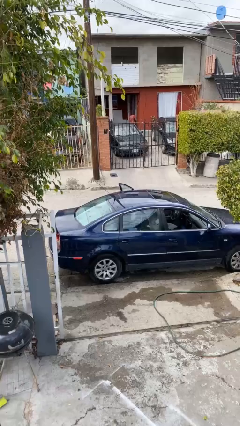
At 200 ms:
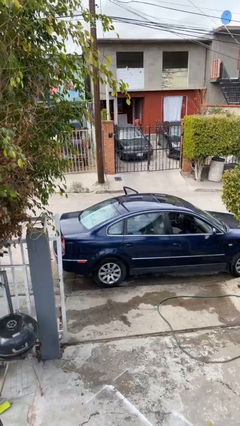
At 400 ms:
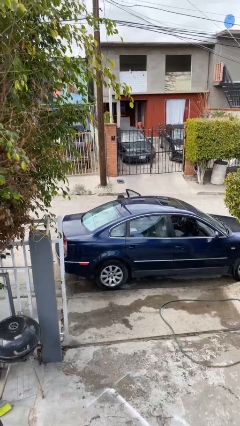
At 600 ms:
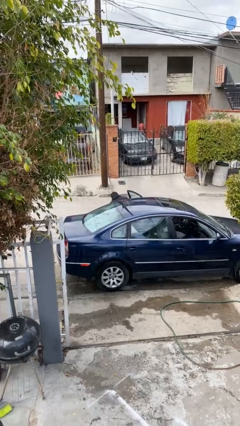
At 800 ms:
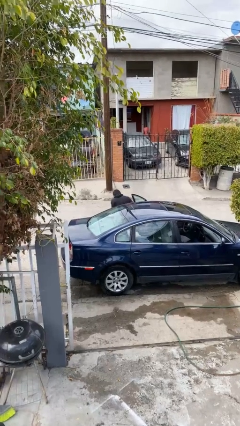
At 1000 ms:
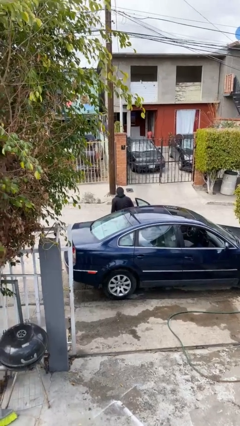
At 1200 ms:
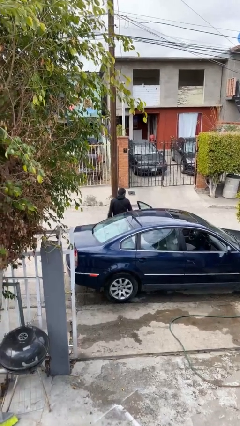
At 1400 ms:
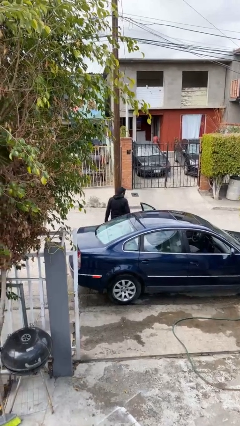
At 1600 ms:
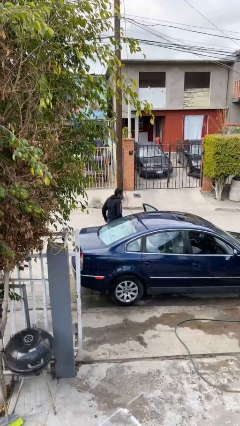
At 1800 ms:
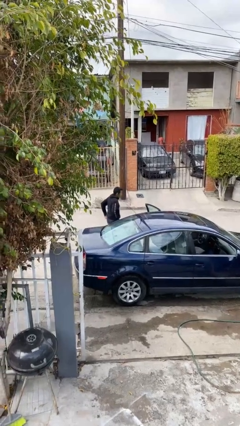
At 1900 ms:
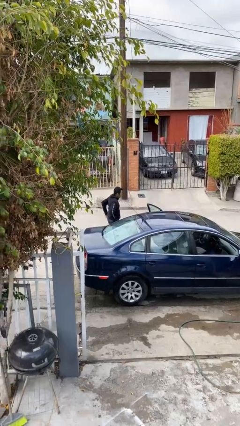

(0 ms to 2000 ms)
person exits car

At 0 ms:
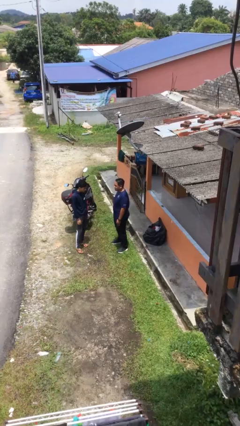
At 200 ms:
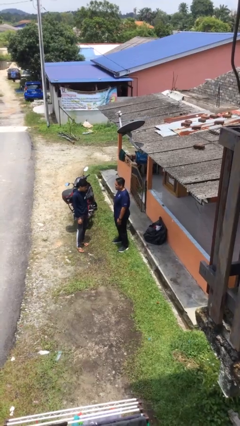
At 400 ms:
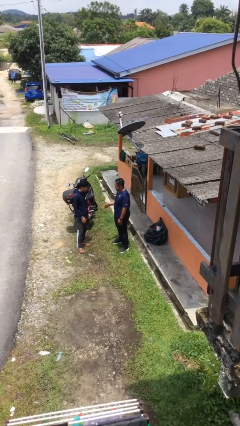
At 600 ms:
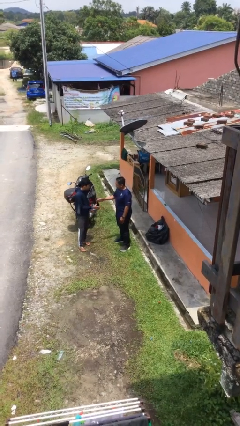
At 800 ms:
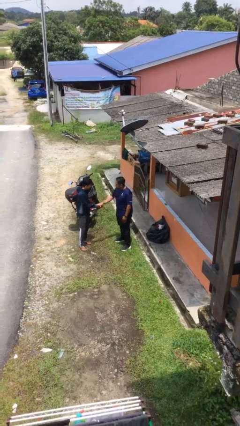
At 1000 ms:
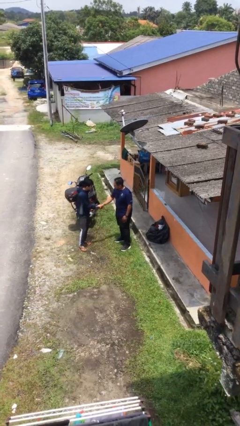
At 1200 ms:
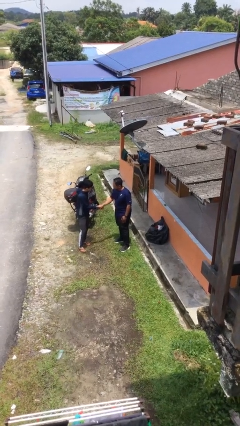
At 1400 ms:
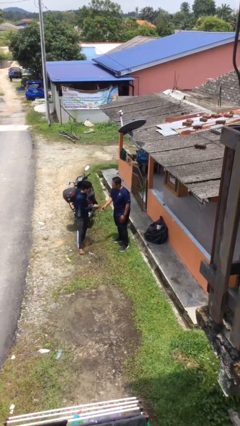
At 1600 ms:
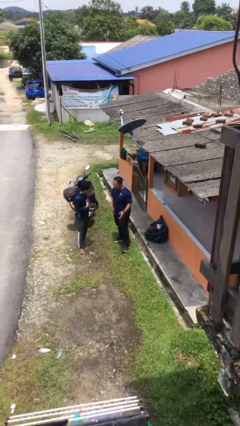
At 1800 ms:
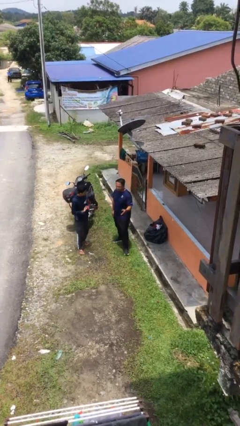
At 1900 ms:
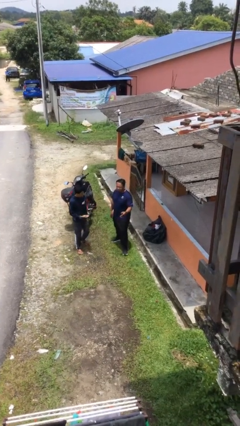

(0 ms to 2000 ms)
person shakes hand

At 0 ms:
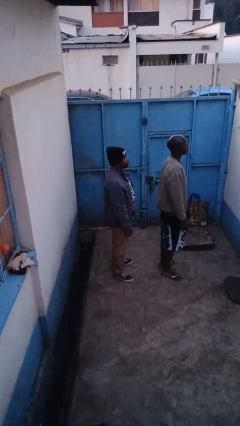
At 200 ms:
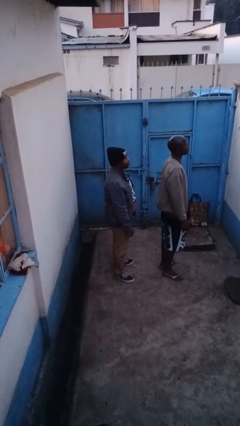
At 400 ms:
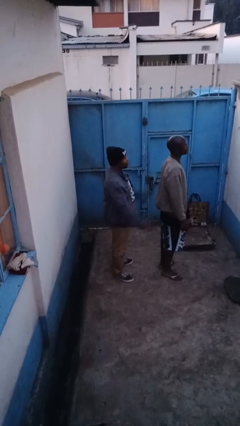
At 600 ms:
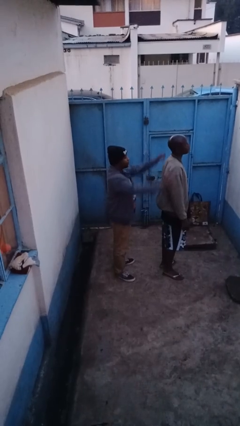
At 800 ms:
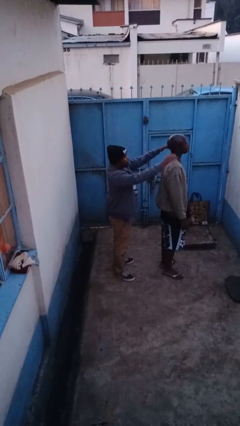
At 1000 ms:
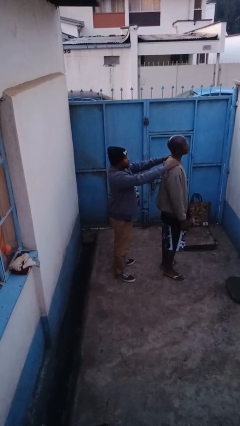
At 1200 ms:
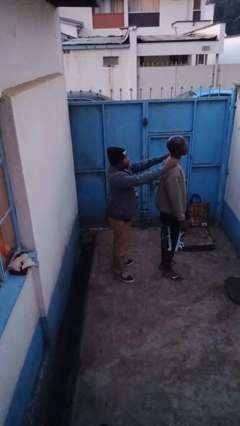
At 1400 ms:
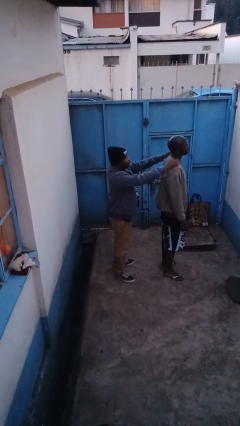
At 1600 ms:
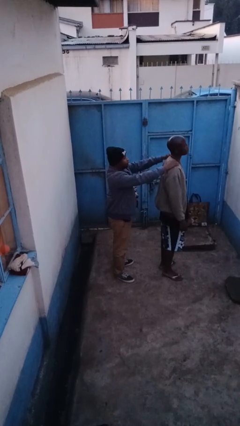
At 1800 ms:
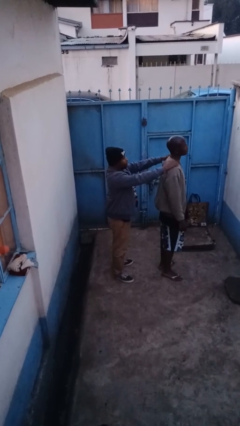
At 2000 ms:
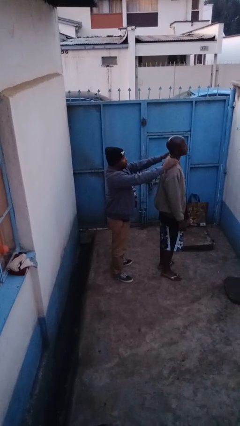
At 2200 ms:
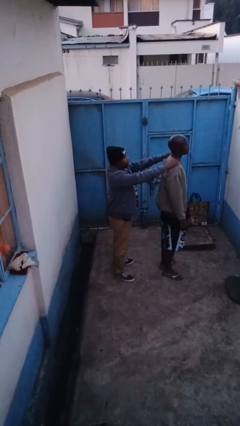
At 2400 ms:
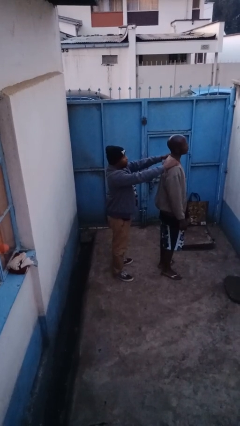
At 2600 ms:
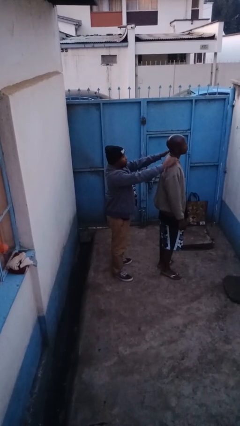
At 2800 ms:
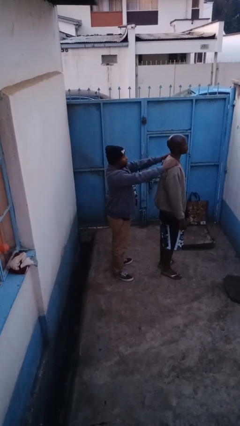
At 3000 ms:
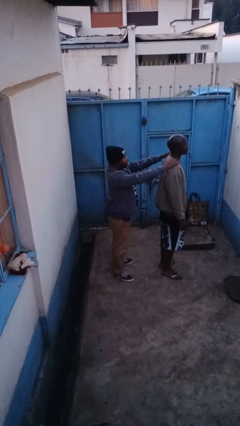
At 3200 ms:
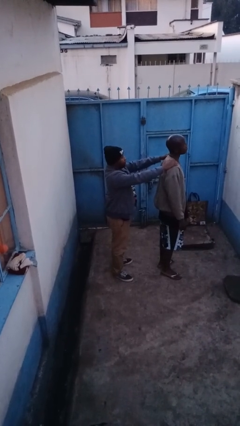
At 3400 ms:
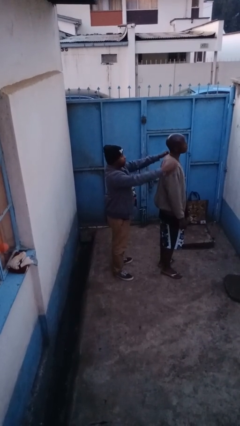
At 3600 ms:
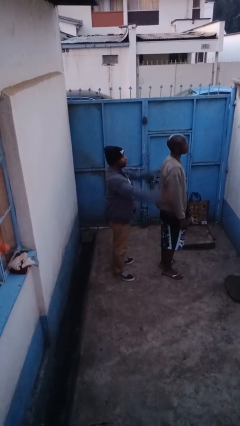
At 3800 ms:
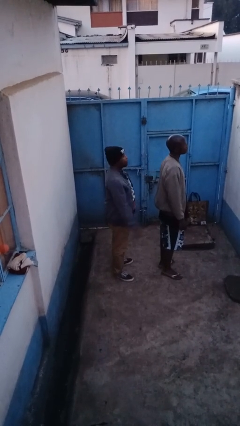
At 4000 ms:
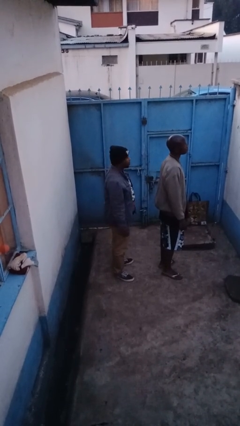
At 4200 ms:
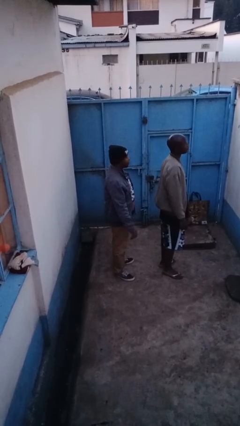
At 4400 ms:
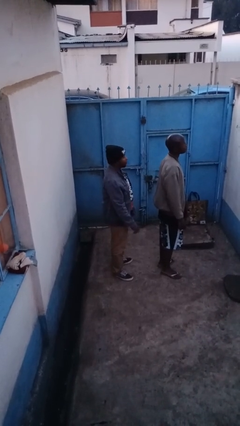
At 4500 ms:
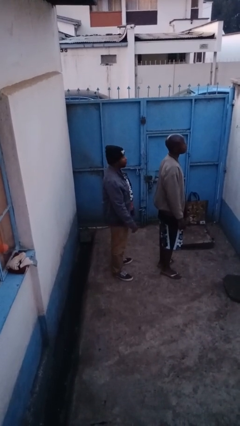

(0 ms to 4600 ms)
person pounds shoulders of person

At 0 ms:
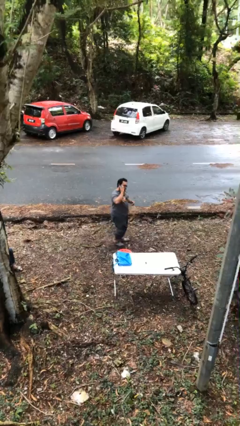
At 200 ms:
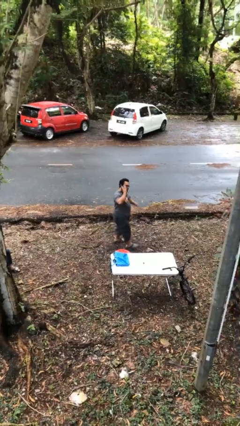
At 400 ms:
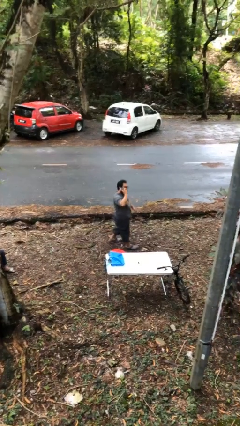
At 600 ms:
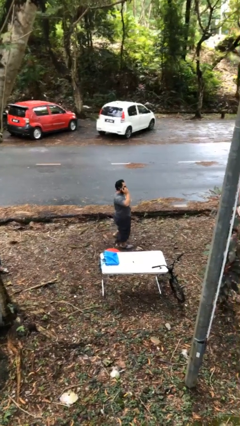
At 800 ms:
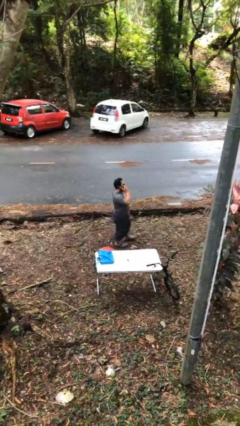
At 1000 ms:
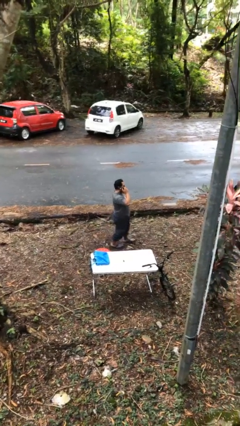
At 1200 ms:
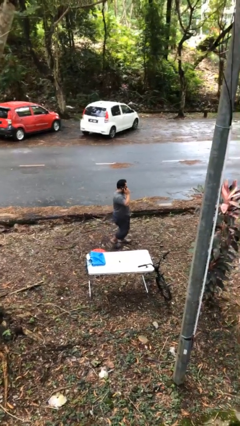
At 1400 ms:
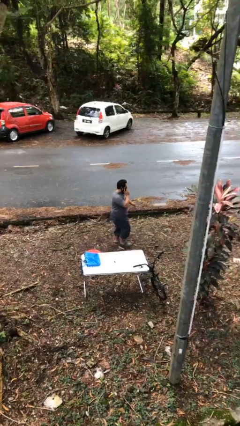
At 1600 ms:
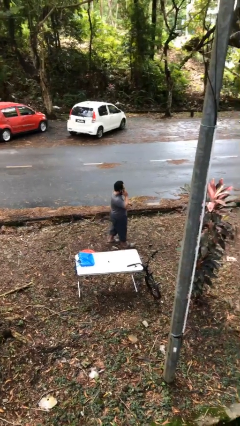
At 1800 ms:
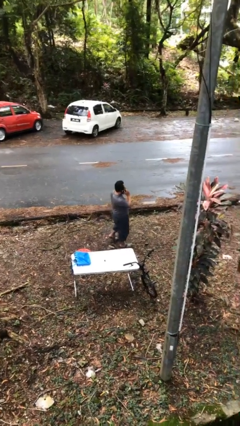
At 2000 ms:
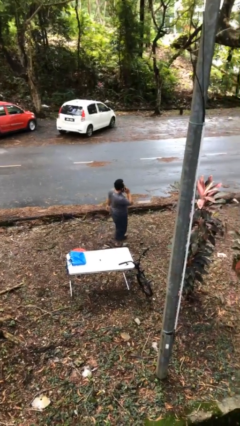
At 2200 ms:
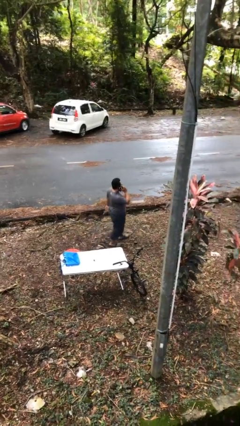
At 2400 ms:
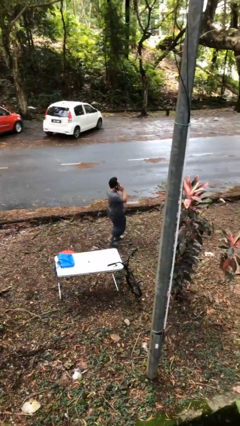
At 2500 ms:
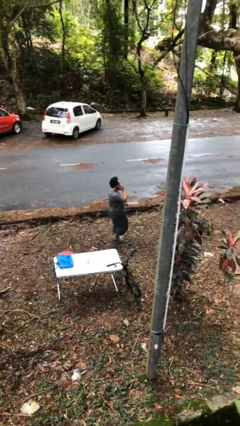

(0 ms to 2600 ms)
person talks on phone

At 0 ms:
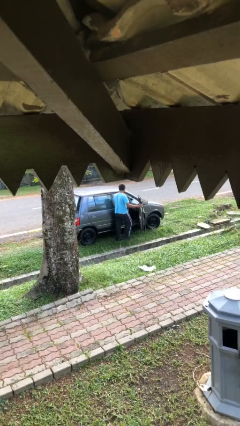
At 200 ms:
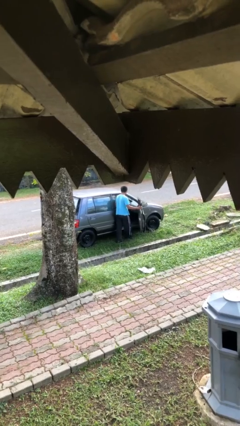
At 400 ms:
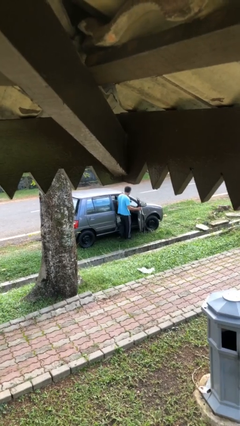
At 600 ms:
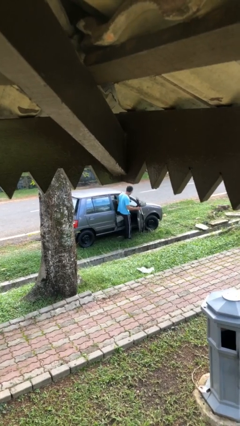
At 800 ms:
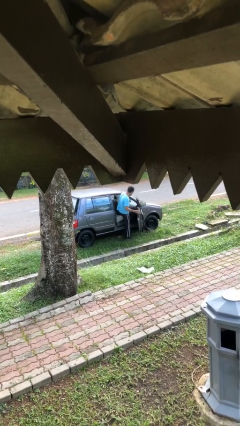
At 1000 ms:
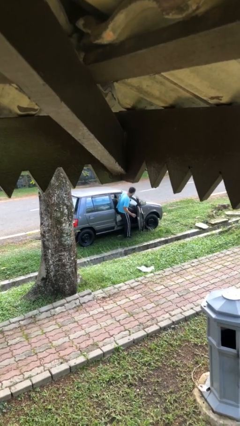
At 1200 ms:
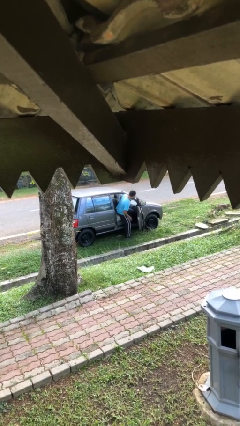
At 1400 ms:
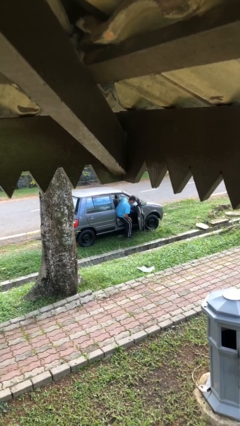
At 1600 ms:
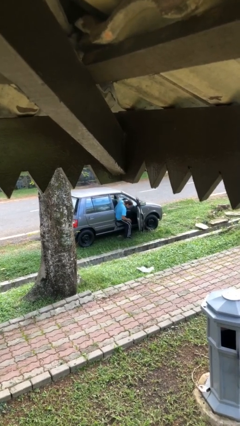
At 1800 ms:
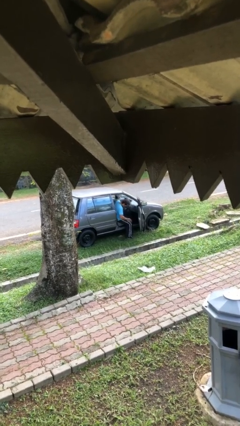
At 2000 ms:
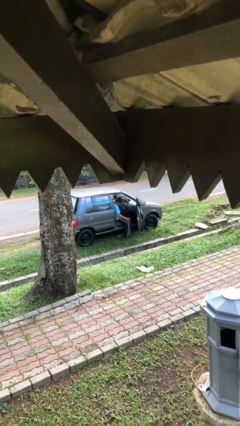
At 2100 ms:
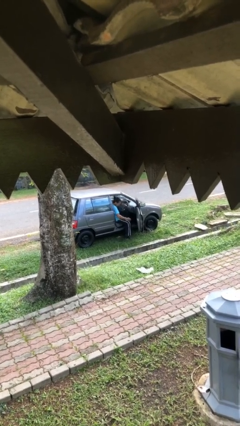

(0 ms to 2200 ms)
person enters car

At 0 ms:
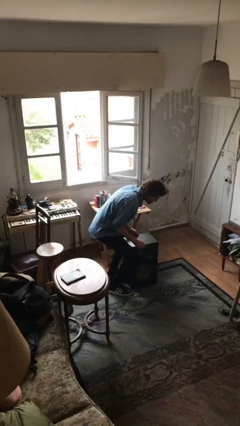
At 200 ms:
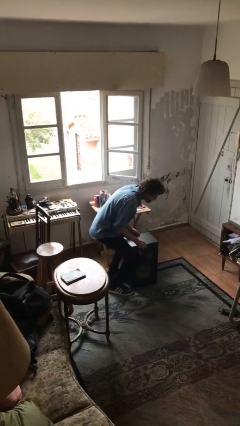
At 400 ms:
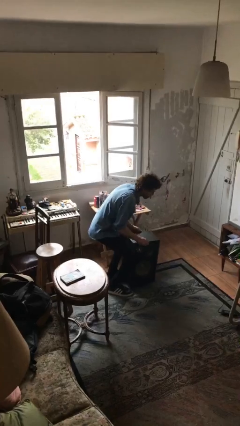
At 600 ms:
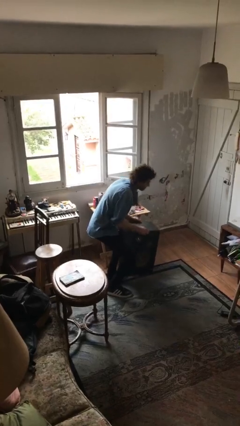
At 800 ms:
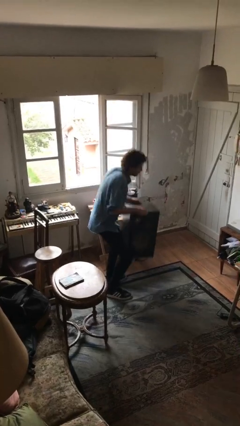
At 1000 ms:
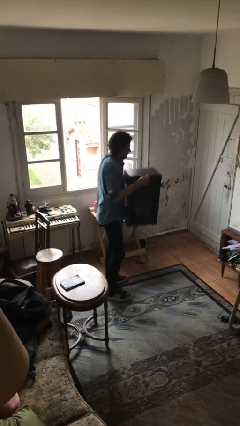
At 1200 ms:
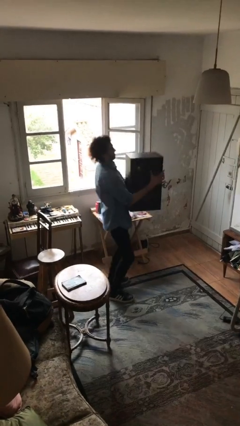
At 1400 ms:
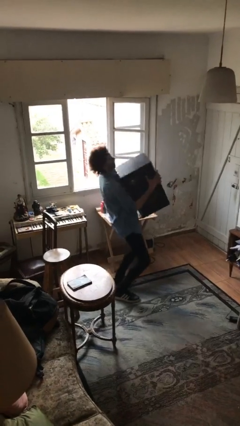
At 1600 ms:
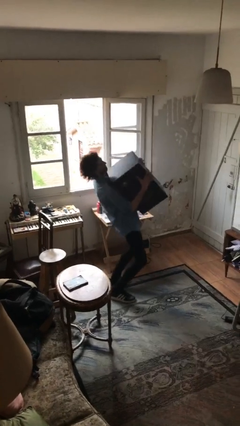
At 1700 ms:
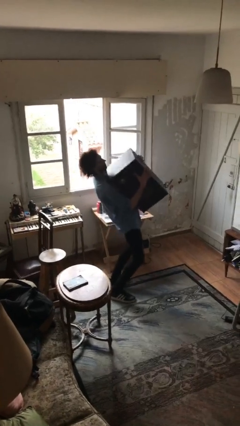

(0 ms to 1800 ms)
person picks up object from floor

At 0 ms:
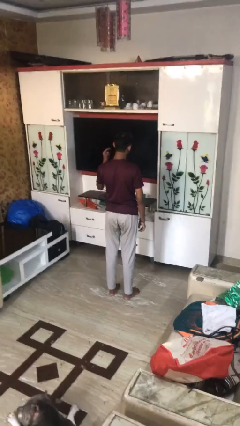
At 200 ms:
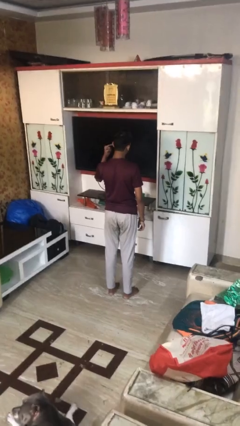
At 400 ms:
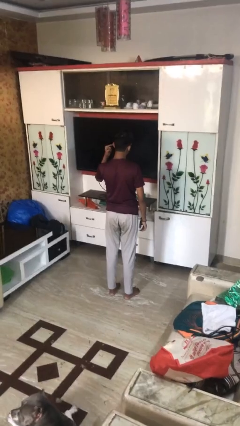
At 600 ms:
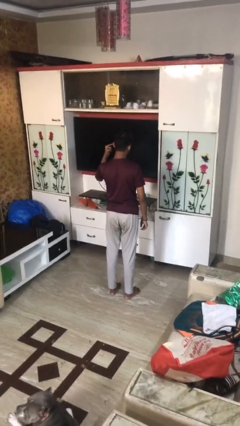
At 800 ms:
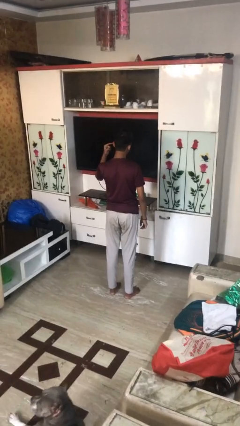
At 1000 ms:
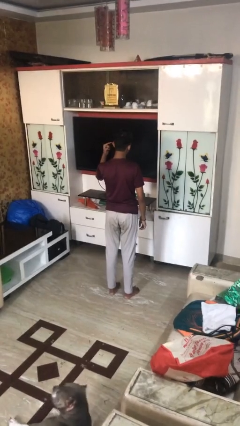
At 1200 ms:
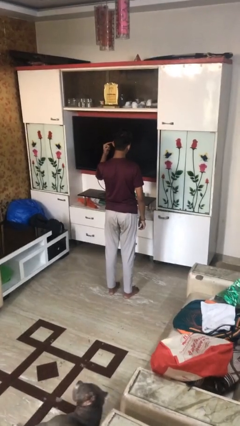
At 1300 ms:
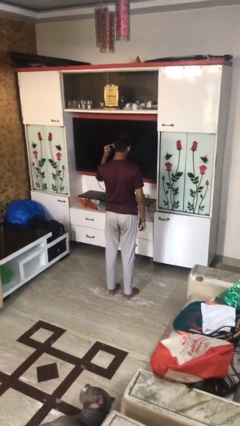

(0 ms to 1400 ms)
person gestures listen closely
